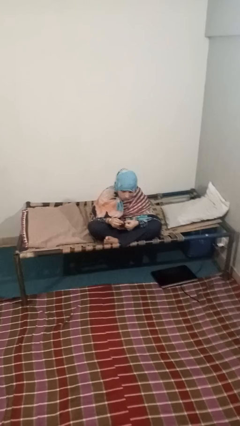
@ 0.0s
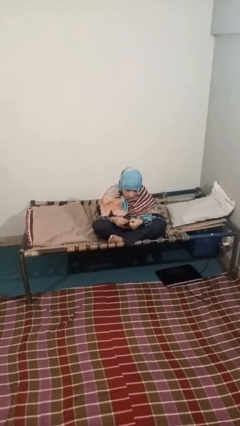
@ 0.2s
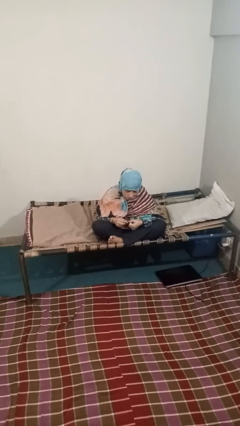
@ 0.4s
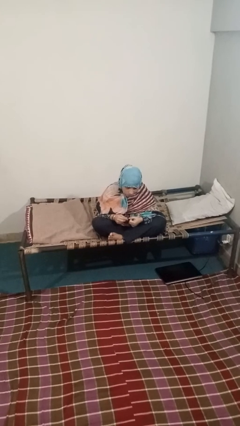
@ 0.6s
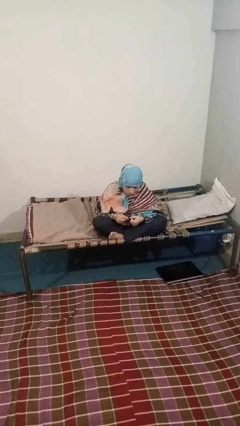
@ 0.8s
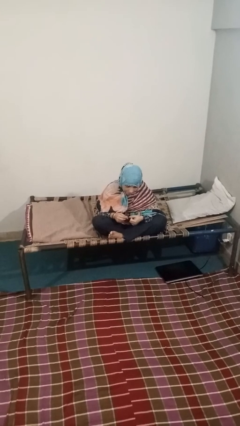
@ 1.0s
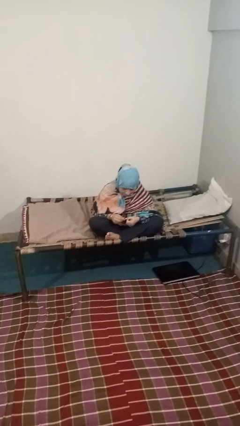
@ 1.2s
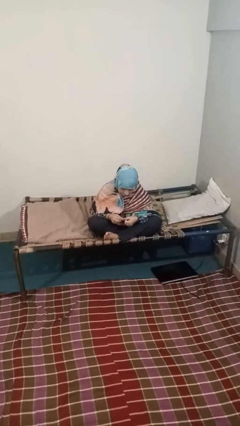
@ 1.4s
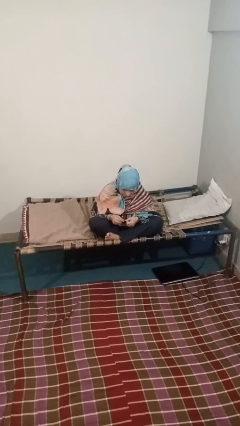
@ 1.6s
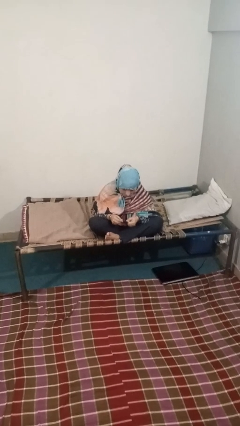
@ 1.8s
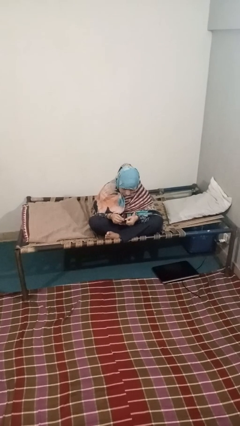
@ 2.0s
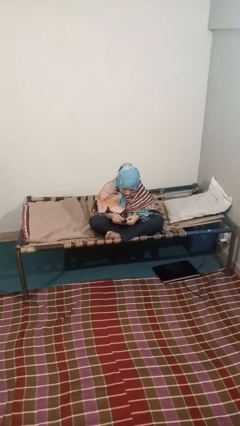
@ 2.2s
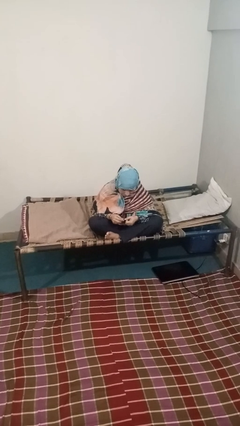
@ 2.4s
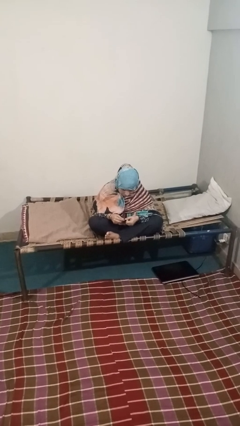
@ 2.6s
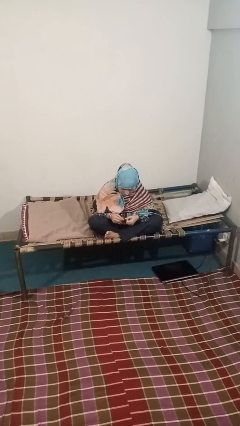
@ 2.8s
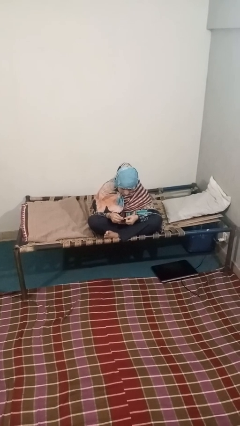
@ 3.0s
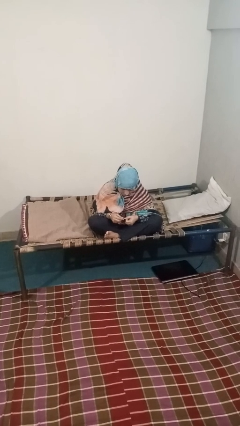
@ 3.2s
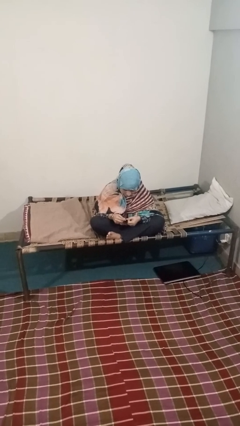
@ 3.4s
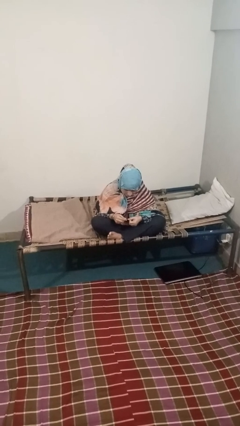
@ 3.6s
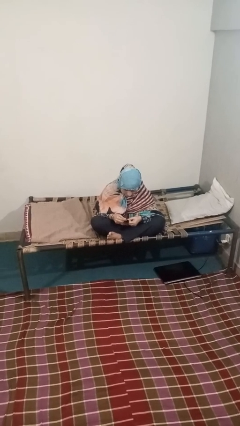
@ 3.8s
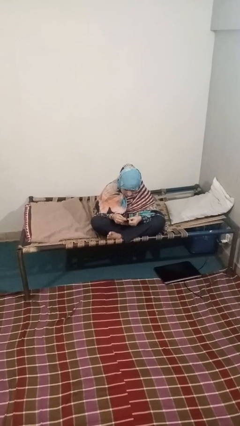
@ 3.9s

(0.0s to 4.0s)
person files fingernails

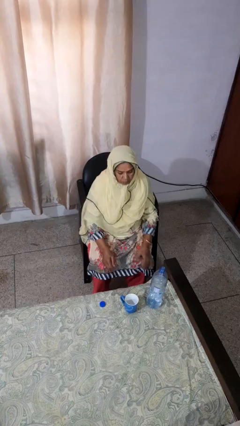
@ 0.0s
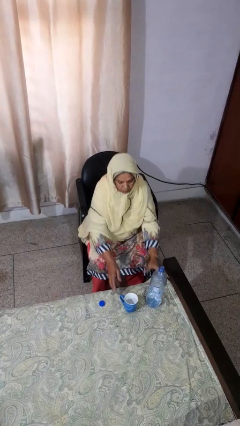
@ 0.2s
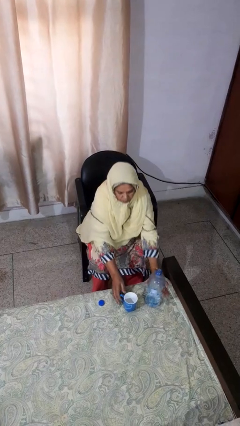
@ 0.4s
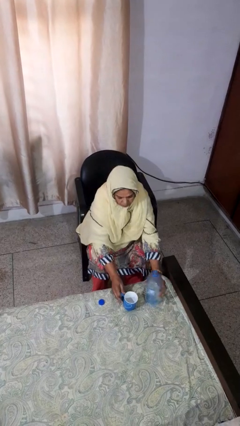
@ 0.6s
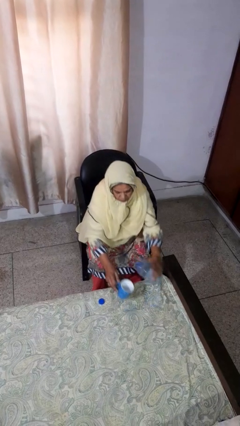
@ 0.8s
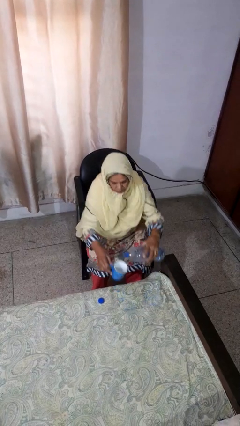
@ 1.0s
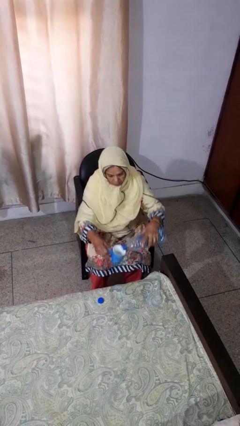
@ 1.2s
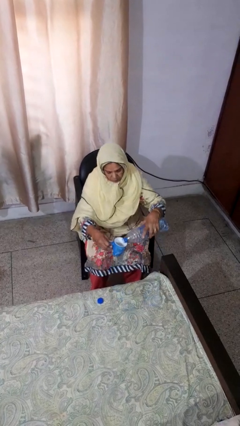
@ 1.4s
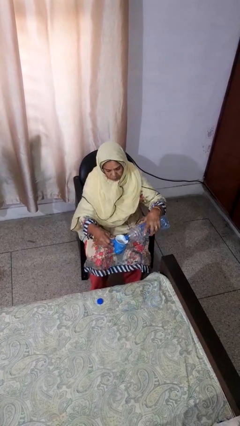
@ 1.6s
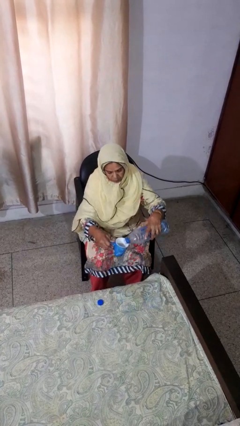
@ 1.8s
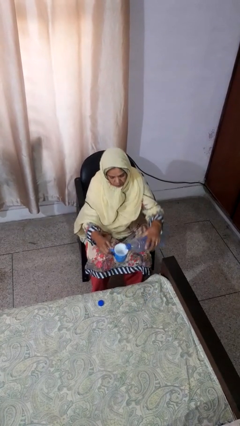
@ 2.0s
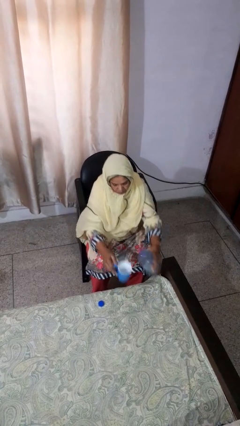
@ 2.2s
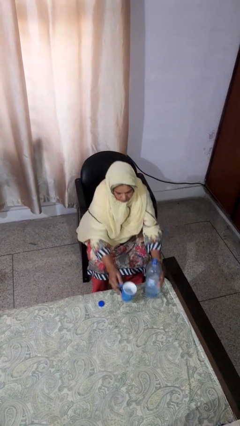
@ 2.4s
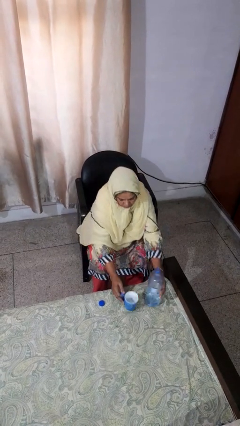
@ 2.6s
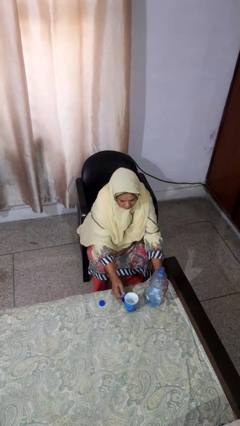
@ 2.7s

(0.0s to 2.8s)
person pours liquid into cup

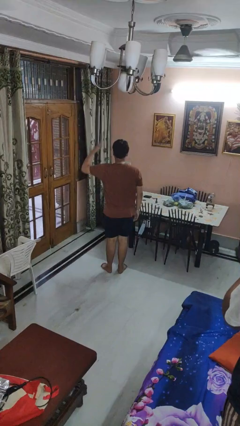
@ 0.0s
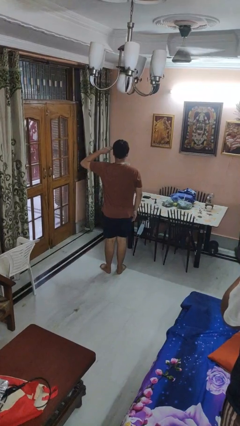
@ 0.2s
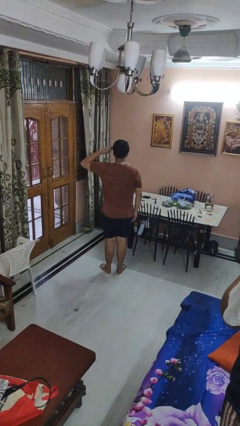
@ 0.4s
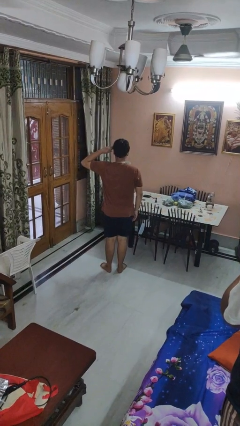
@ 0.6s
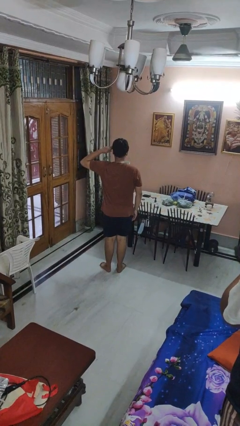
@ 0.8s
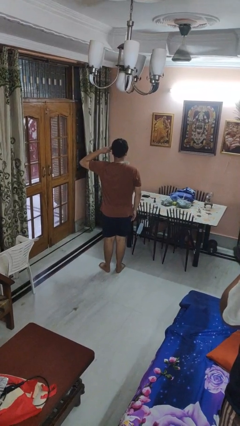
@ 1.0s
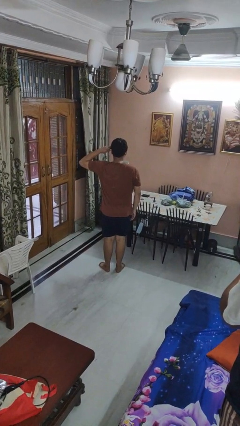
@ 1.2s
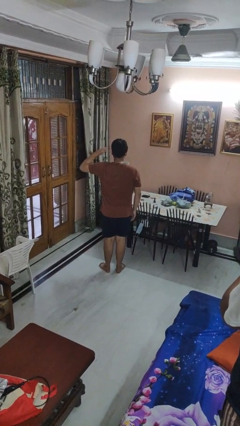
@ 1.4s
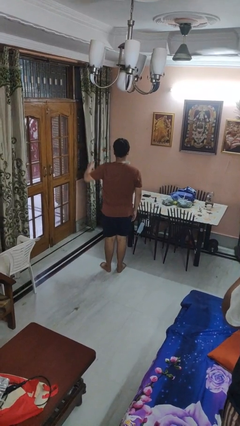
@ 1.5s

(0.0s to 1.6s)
person salutes

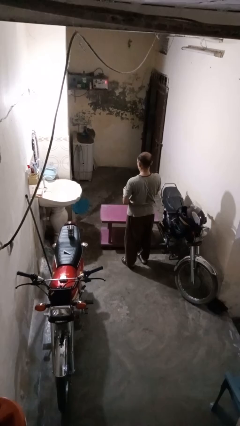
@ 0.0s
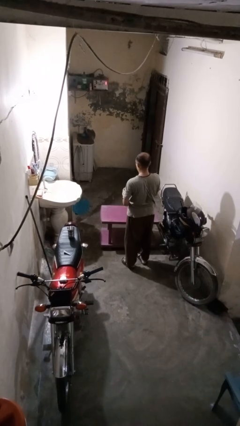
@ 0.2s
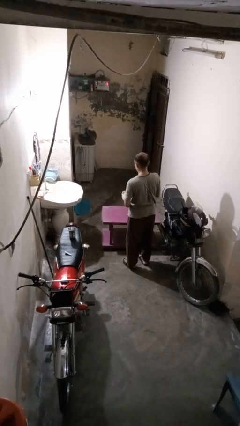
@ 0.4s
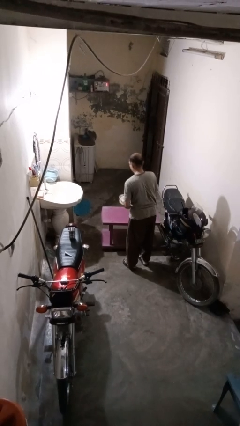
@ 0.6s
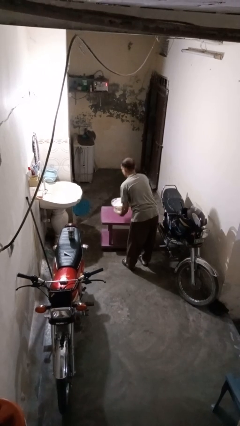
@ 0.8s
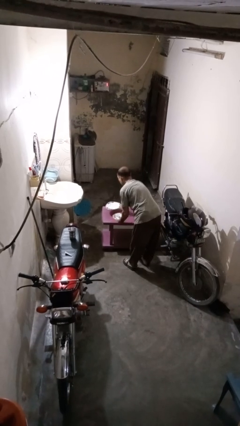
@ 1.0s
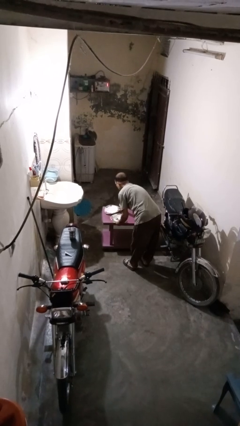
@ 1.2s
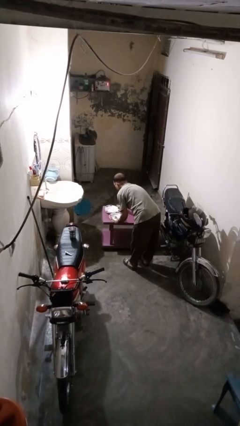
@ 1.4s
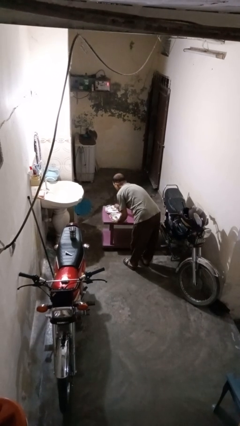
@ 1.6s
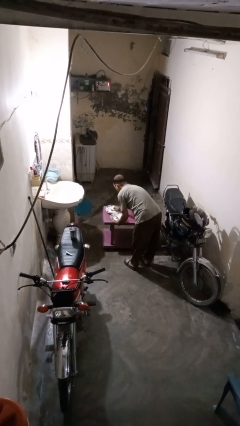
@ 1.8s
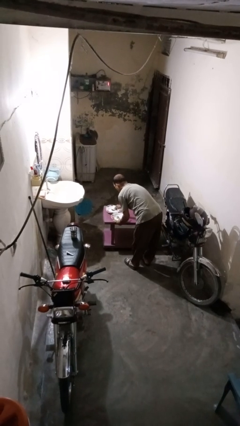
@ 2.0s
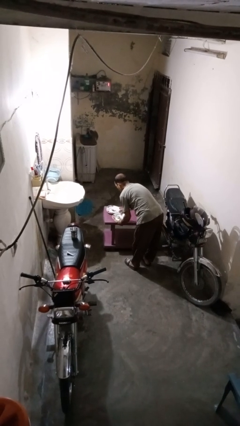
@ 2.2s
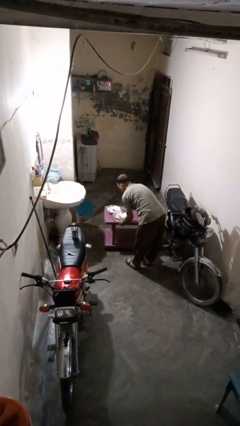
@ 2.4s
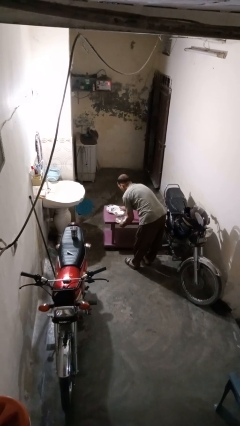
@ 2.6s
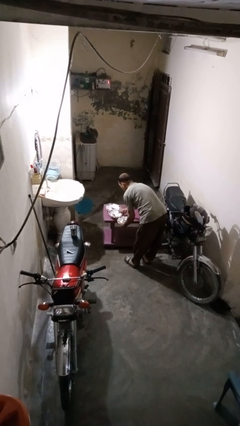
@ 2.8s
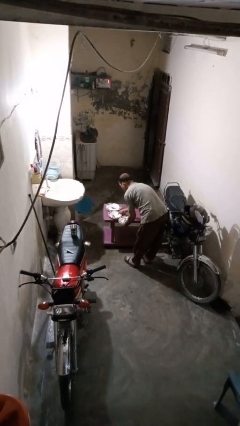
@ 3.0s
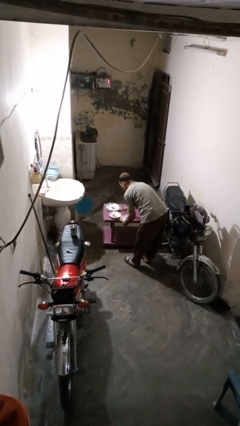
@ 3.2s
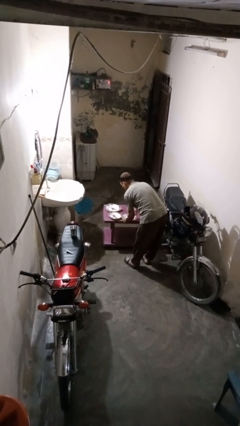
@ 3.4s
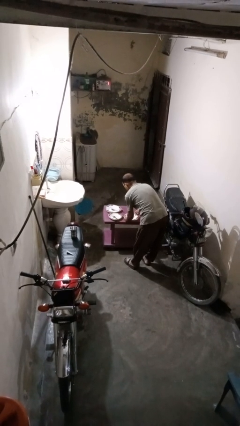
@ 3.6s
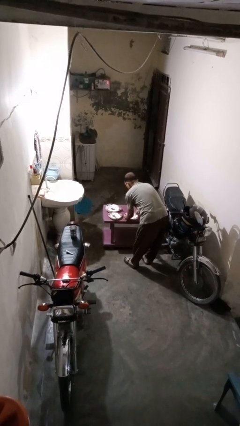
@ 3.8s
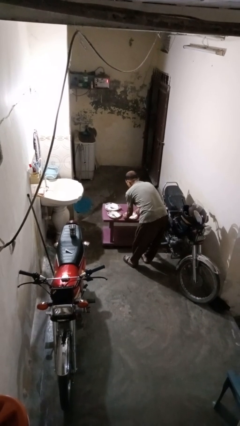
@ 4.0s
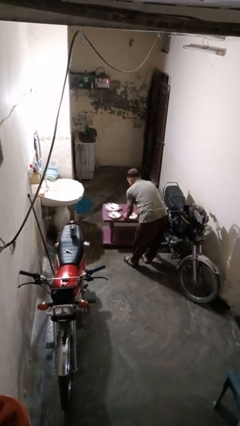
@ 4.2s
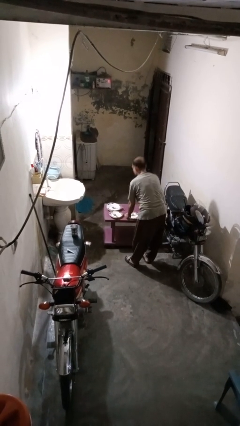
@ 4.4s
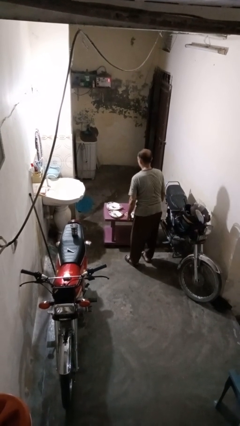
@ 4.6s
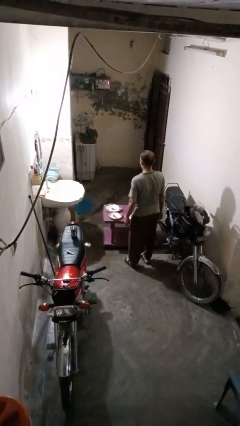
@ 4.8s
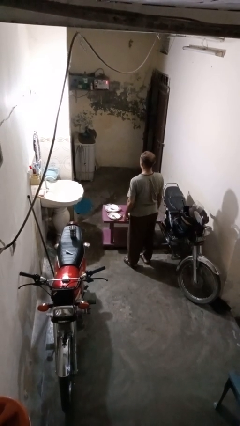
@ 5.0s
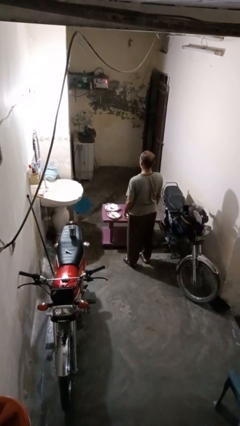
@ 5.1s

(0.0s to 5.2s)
person sets table

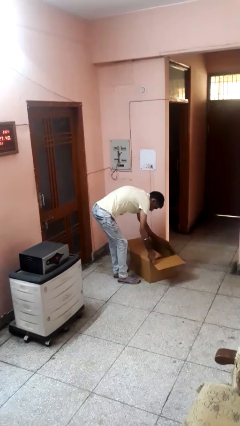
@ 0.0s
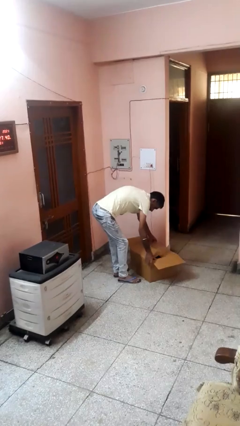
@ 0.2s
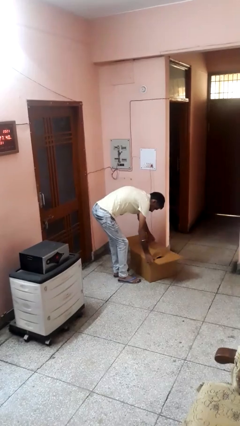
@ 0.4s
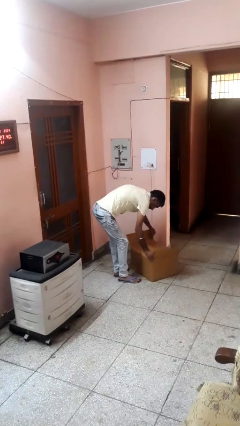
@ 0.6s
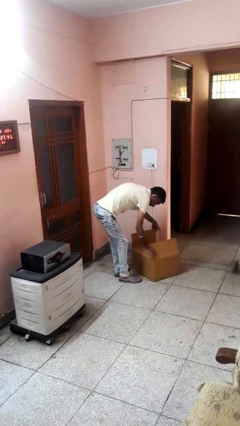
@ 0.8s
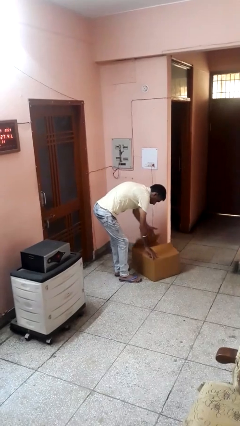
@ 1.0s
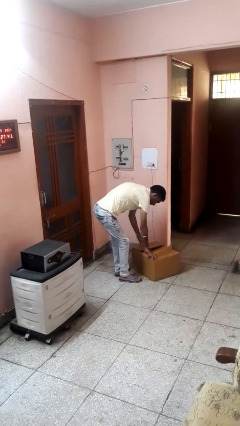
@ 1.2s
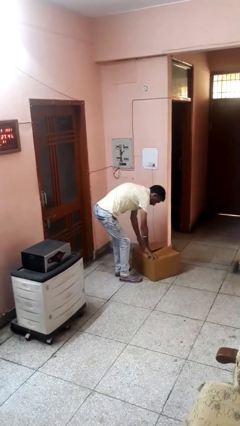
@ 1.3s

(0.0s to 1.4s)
person closes box

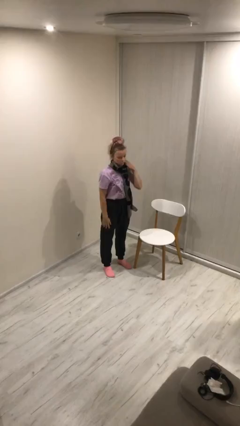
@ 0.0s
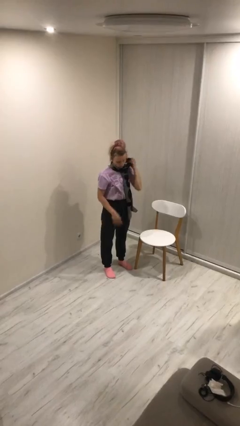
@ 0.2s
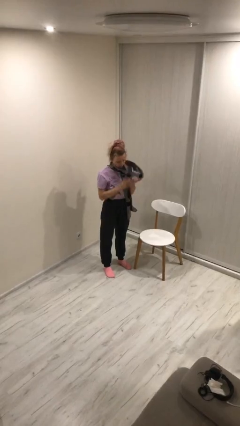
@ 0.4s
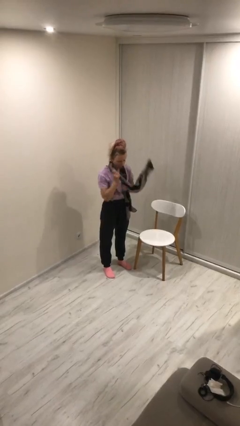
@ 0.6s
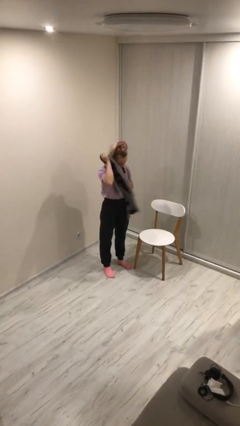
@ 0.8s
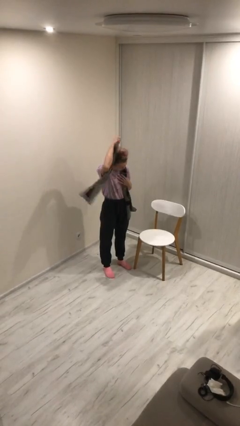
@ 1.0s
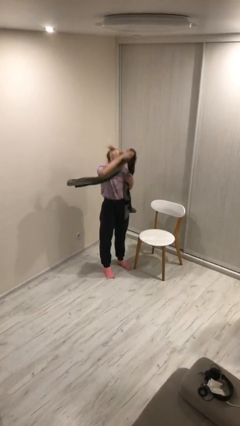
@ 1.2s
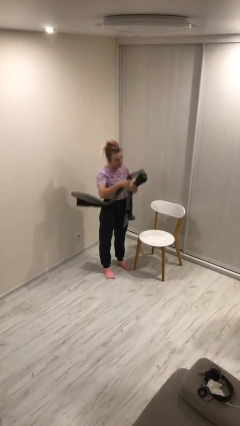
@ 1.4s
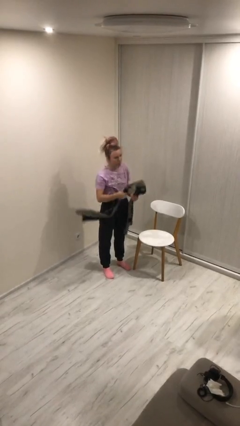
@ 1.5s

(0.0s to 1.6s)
person takes off scarf

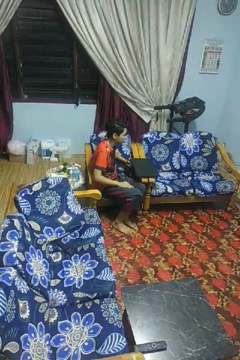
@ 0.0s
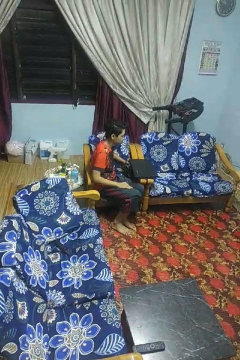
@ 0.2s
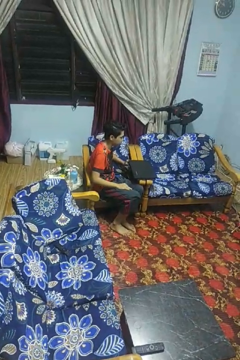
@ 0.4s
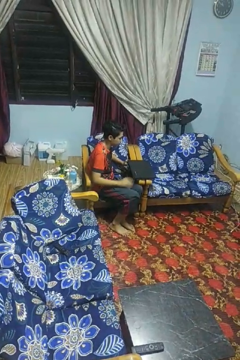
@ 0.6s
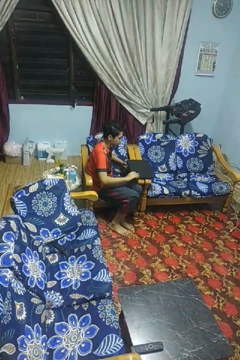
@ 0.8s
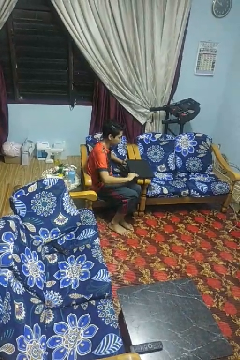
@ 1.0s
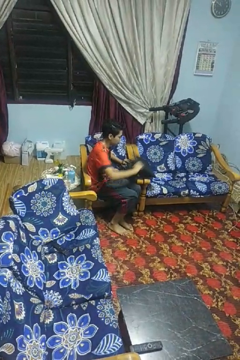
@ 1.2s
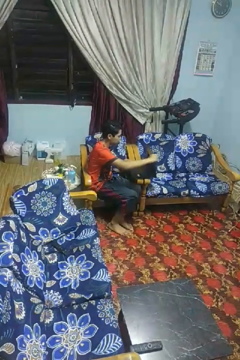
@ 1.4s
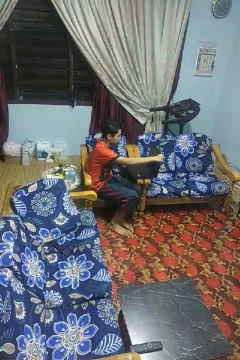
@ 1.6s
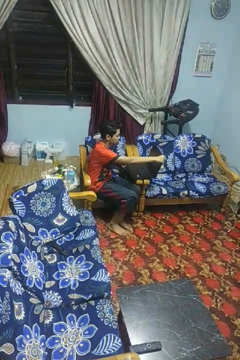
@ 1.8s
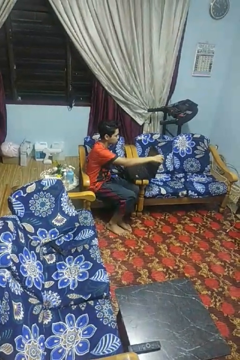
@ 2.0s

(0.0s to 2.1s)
person opens laptop
